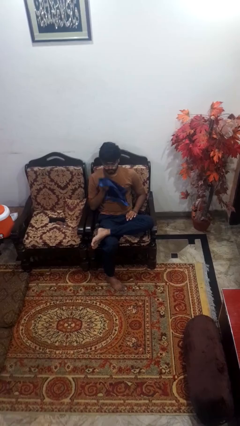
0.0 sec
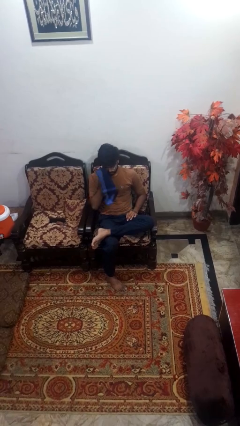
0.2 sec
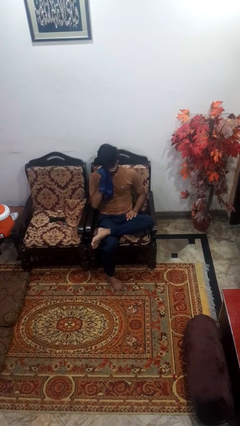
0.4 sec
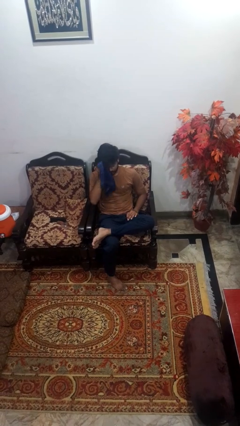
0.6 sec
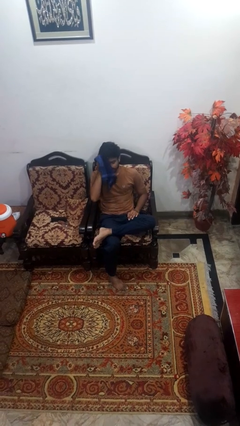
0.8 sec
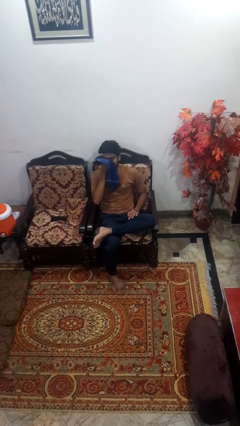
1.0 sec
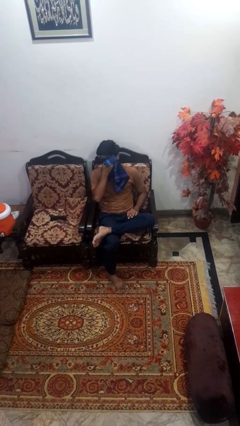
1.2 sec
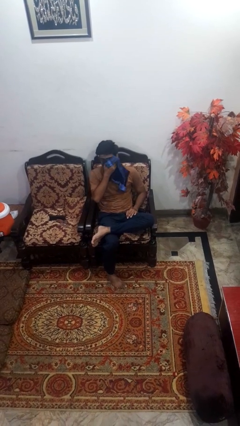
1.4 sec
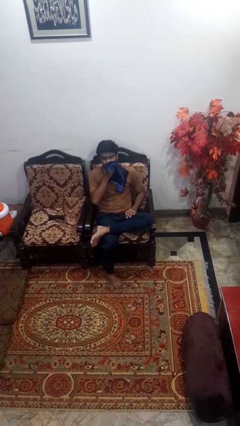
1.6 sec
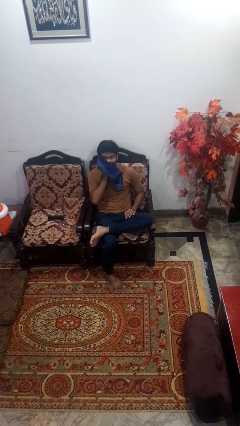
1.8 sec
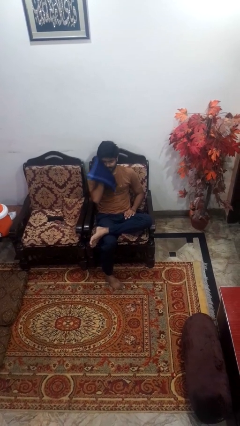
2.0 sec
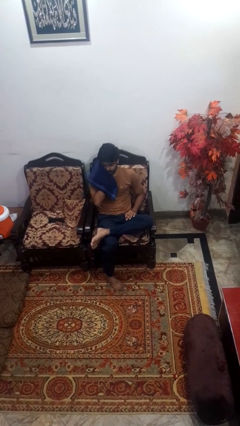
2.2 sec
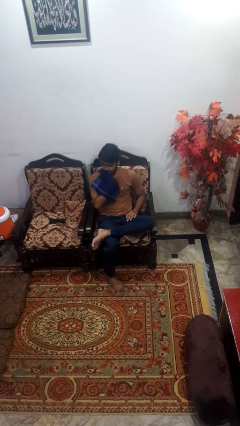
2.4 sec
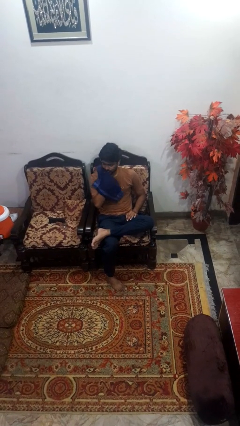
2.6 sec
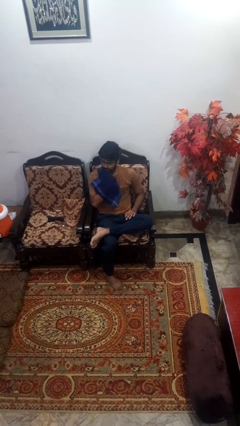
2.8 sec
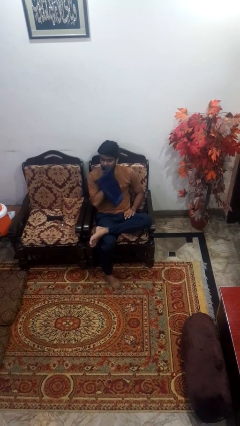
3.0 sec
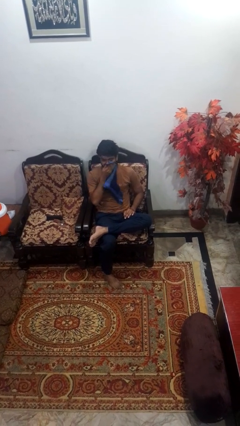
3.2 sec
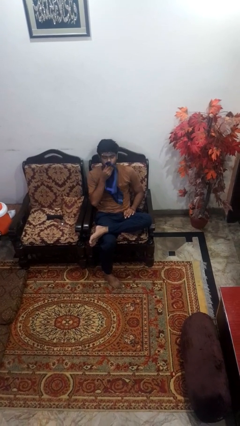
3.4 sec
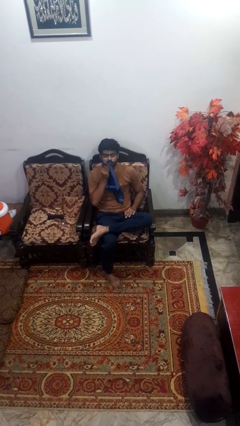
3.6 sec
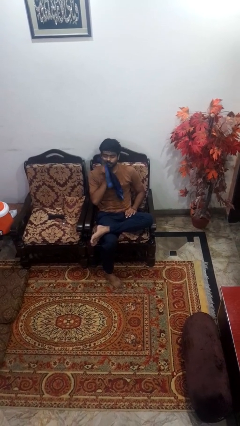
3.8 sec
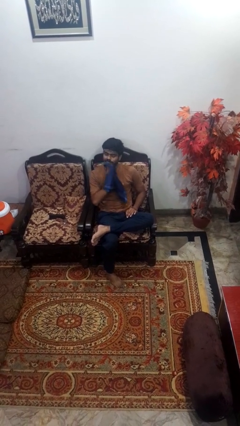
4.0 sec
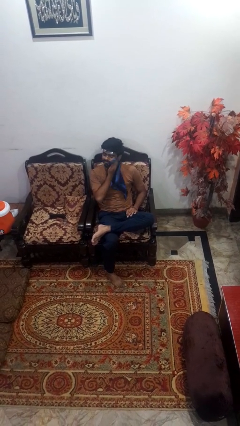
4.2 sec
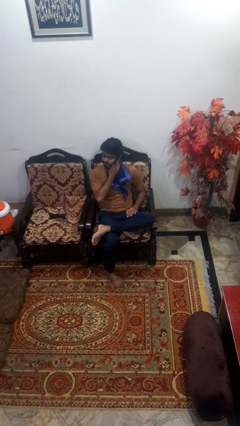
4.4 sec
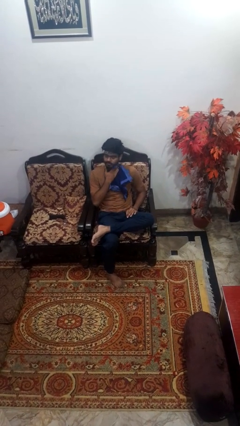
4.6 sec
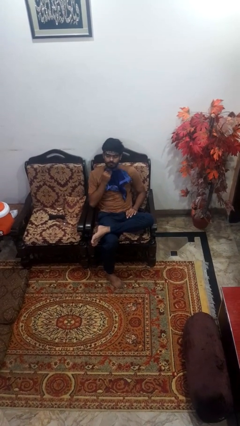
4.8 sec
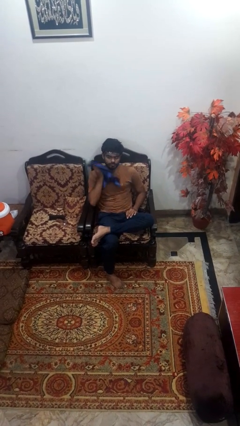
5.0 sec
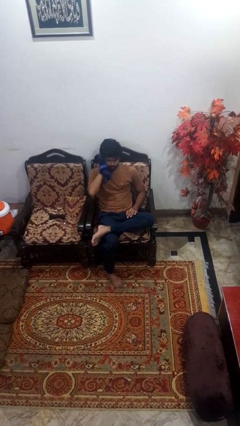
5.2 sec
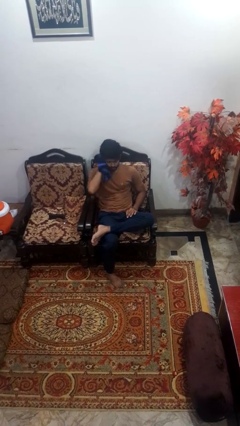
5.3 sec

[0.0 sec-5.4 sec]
person wipes mouth with napkin

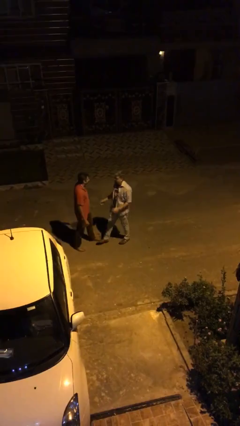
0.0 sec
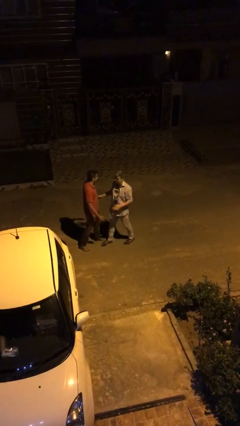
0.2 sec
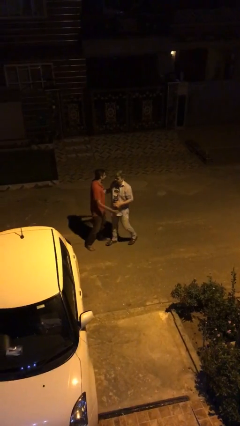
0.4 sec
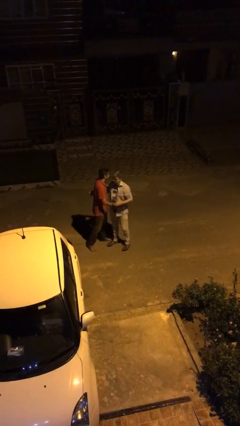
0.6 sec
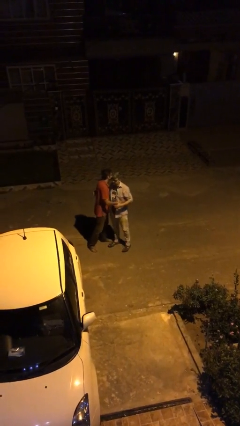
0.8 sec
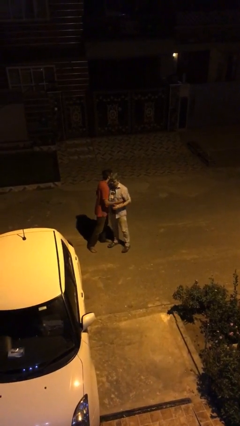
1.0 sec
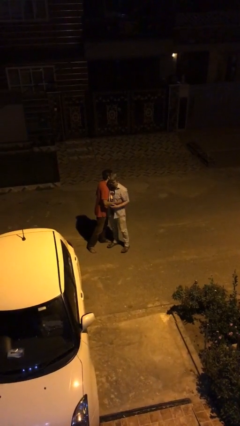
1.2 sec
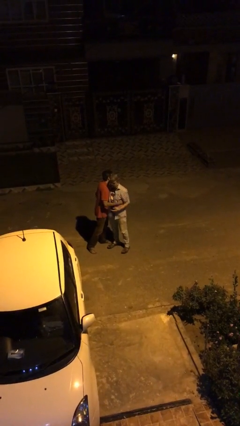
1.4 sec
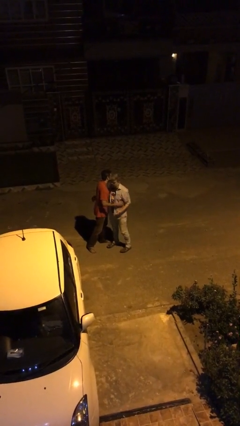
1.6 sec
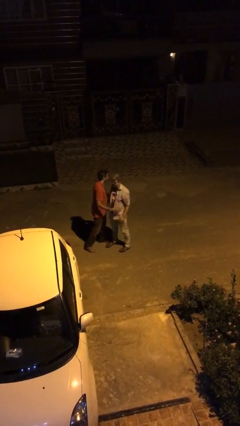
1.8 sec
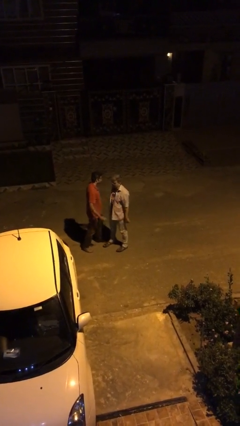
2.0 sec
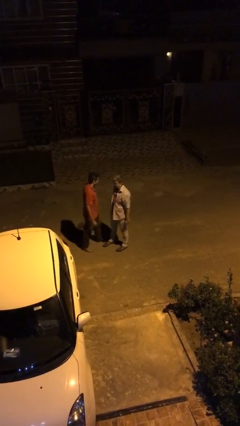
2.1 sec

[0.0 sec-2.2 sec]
person embraces person

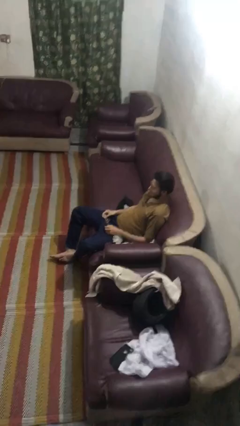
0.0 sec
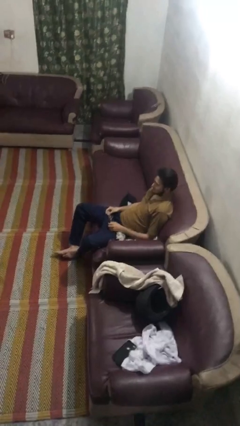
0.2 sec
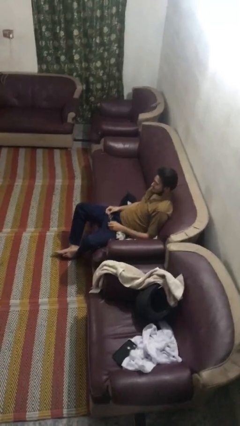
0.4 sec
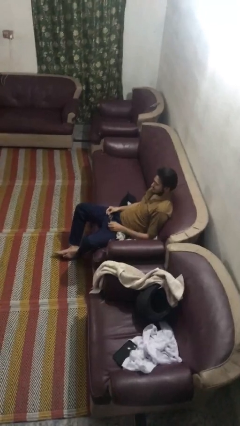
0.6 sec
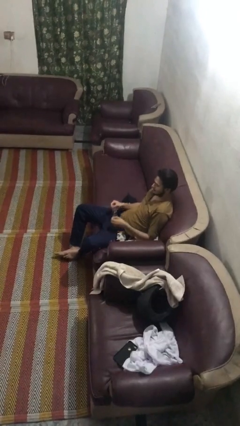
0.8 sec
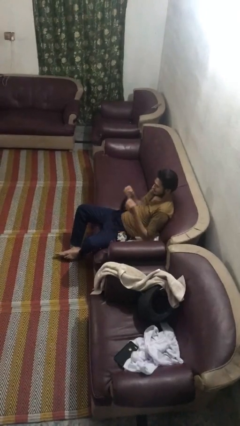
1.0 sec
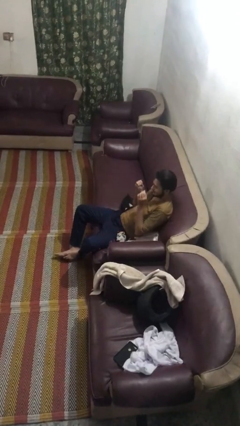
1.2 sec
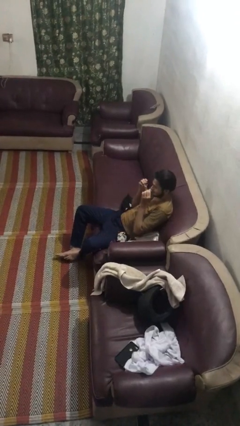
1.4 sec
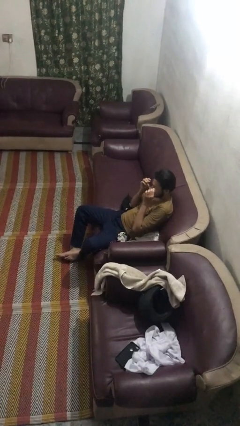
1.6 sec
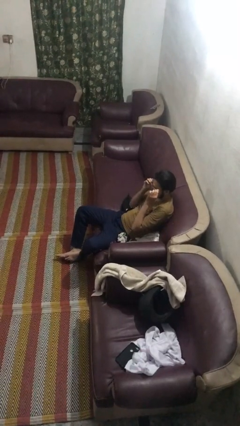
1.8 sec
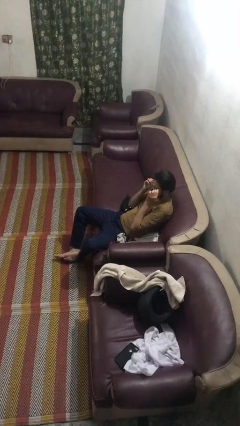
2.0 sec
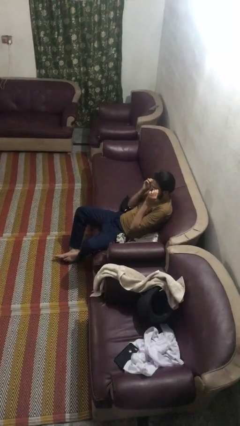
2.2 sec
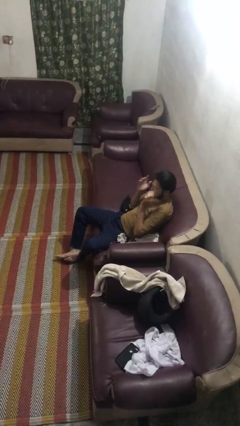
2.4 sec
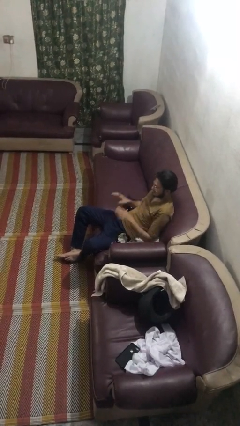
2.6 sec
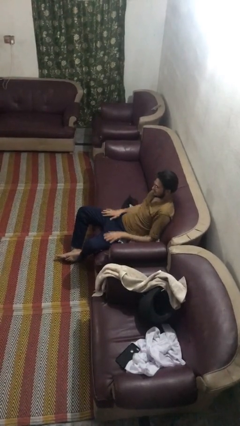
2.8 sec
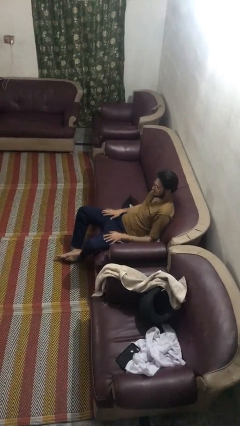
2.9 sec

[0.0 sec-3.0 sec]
person puts on glasses

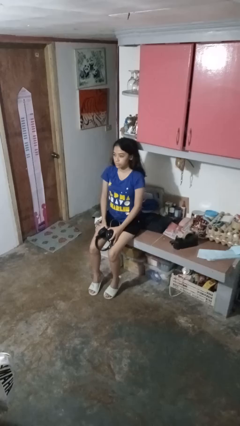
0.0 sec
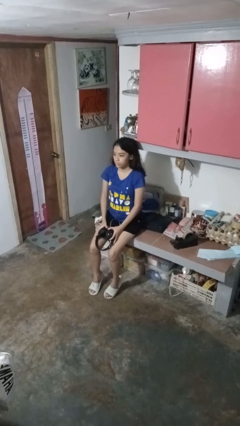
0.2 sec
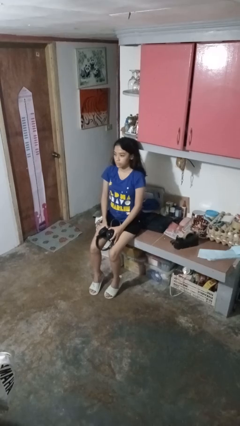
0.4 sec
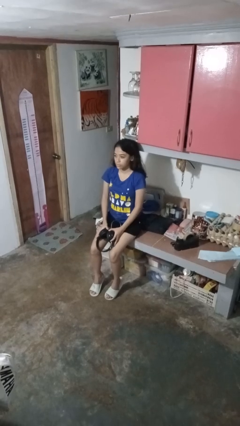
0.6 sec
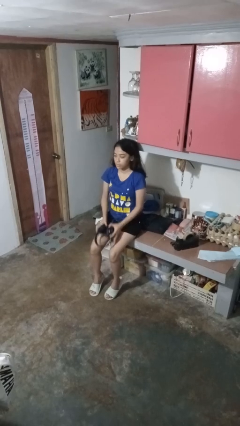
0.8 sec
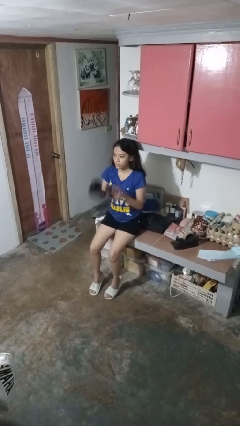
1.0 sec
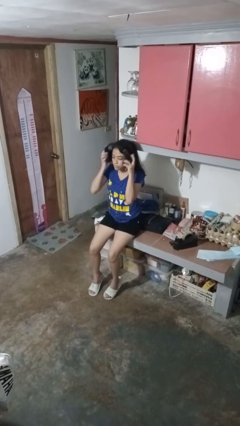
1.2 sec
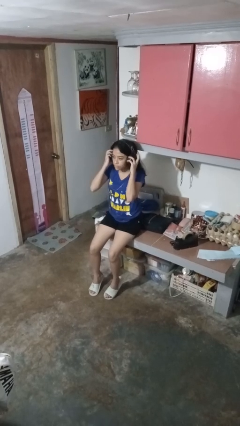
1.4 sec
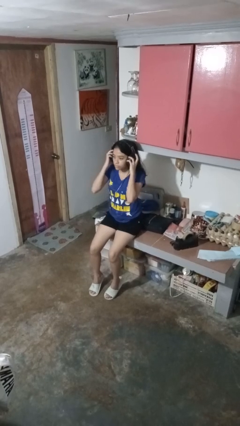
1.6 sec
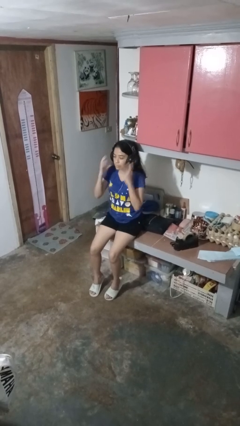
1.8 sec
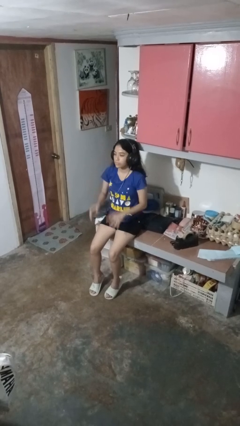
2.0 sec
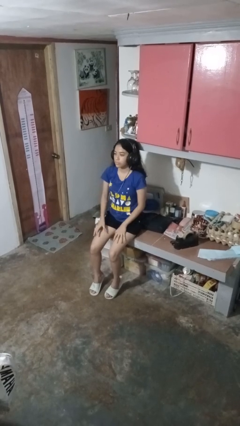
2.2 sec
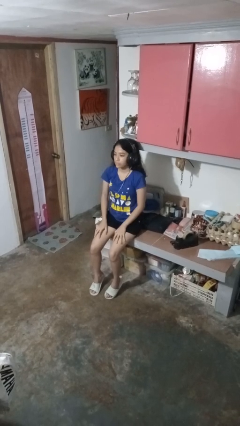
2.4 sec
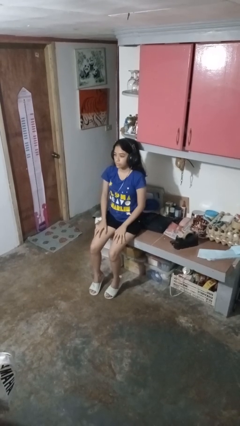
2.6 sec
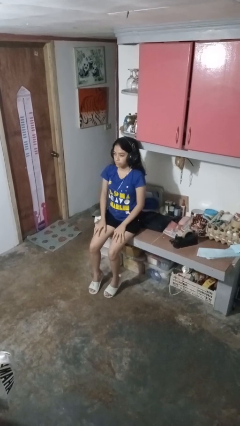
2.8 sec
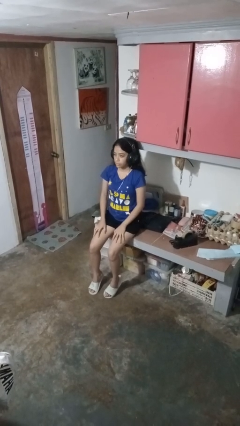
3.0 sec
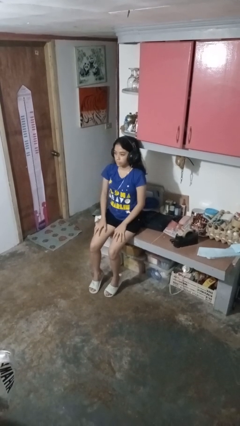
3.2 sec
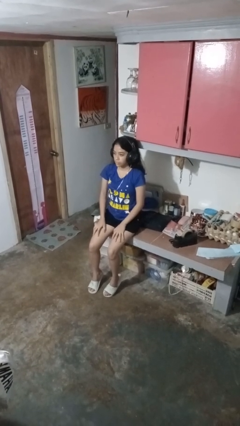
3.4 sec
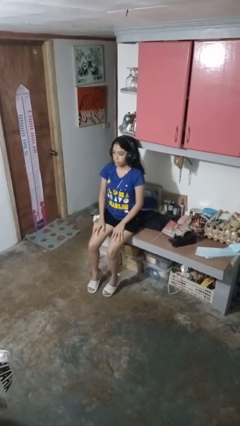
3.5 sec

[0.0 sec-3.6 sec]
person puts on headphones

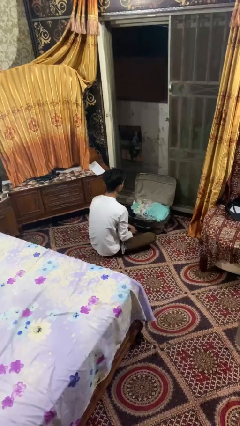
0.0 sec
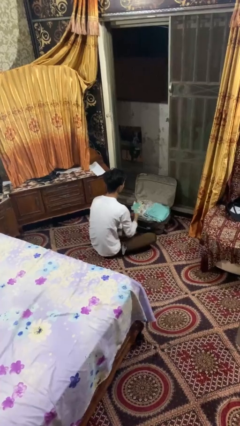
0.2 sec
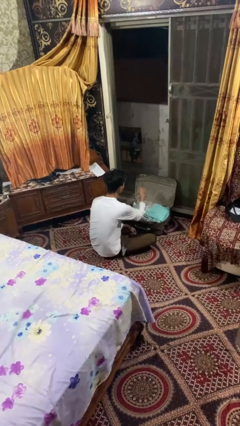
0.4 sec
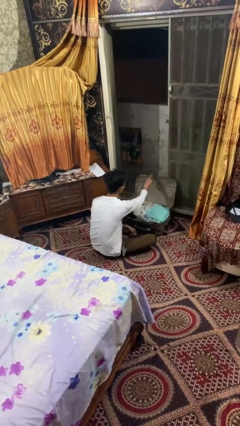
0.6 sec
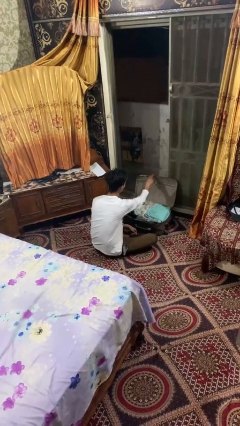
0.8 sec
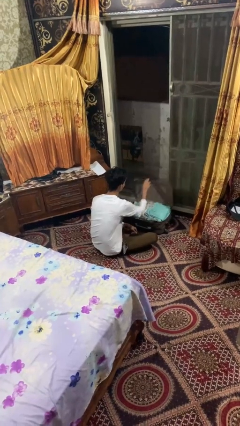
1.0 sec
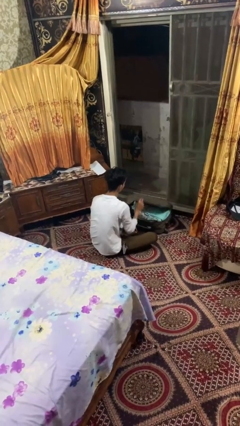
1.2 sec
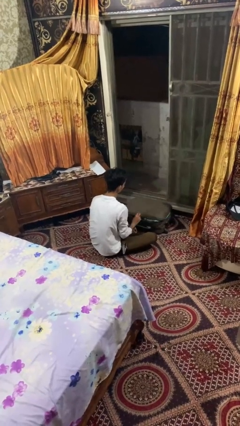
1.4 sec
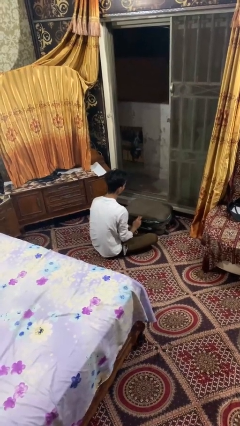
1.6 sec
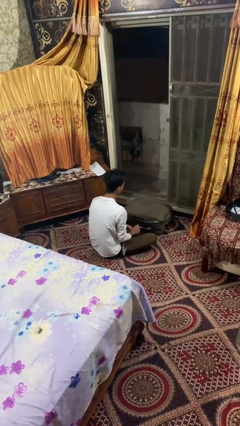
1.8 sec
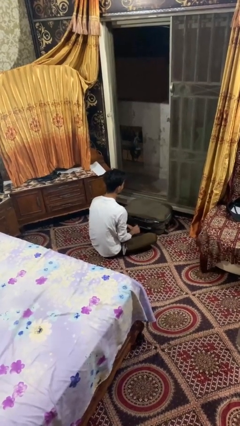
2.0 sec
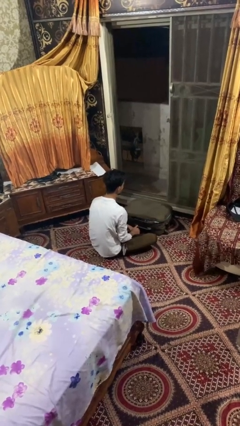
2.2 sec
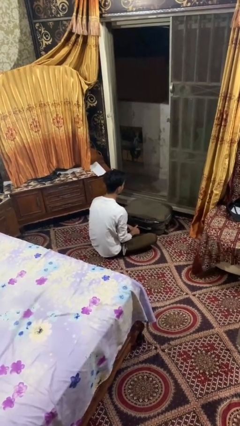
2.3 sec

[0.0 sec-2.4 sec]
person closes suitcase

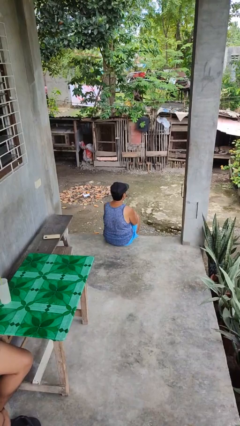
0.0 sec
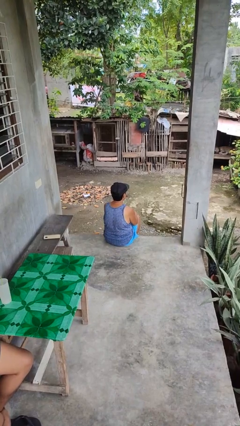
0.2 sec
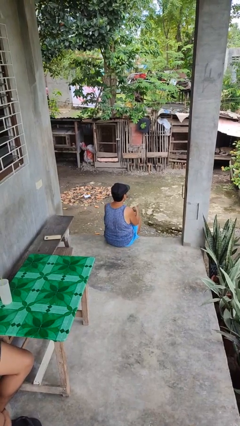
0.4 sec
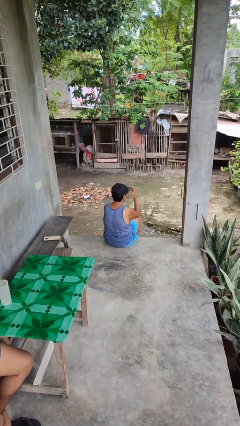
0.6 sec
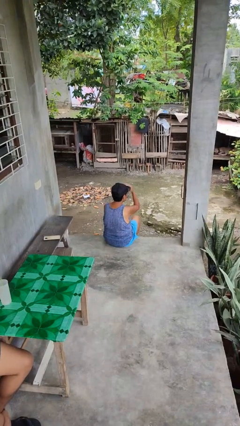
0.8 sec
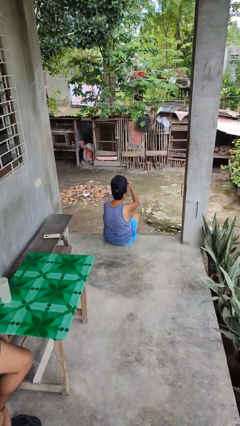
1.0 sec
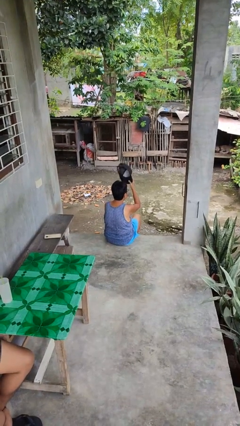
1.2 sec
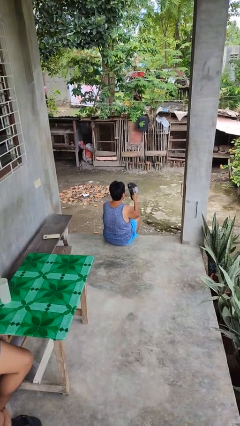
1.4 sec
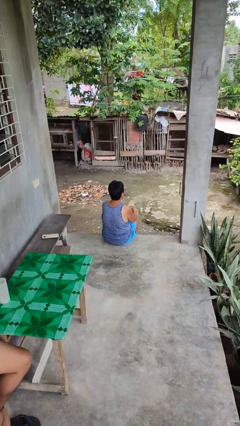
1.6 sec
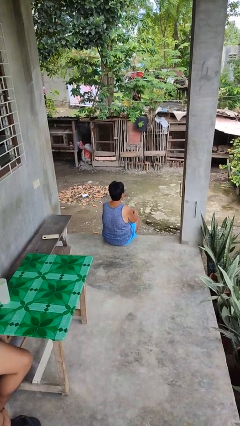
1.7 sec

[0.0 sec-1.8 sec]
person takes off hat
